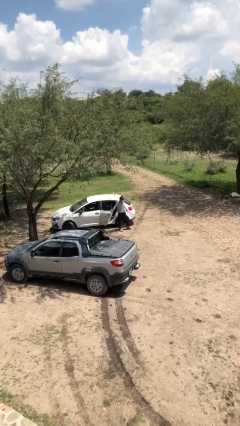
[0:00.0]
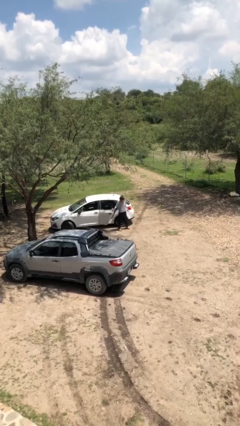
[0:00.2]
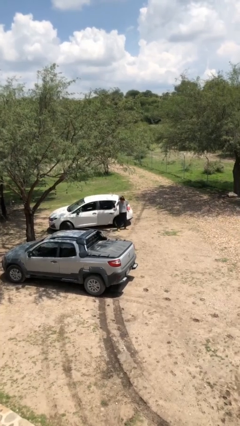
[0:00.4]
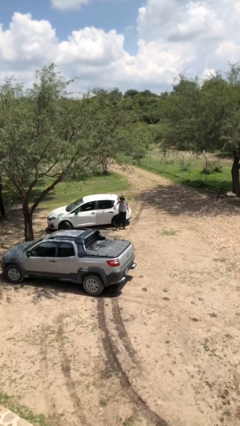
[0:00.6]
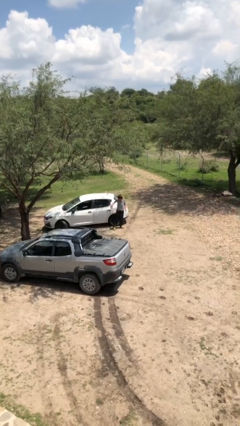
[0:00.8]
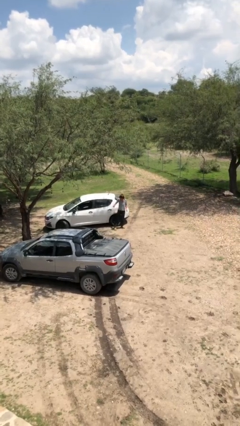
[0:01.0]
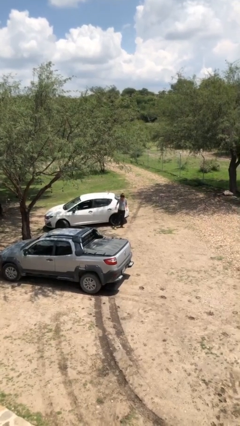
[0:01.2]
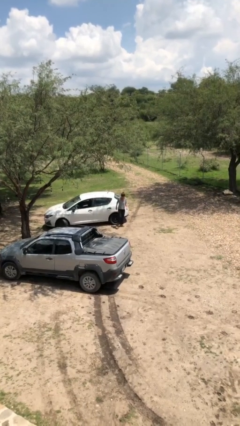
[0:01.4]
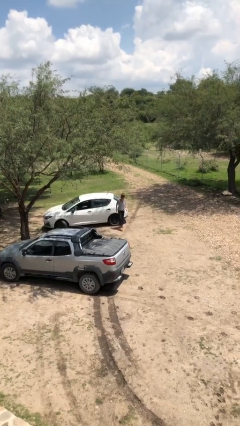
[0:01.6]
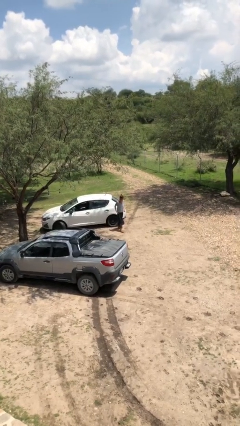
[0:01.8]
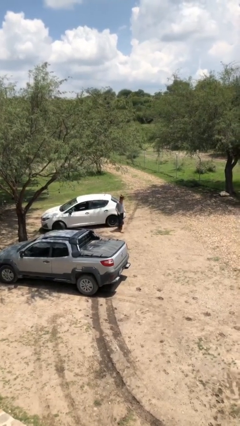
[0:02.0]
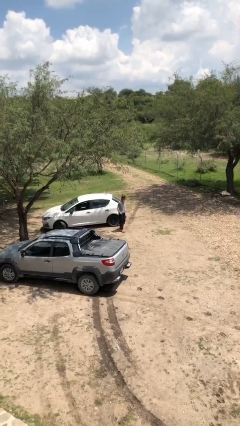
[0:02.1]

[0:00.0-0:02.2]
person closes car door

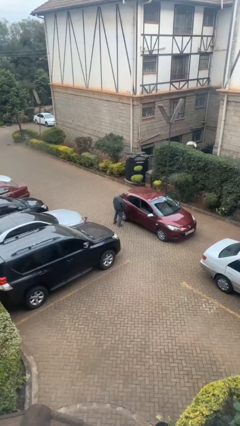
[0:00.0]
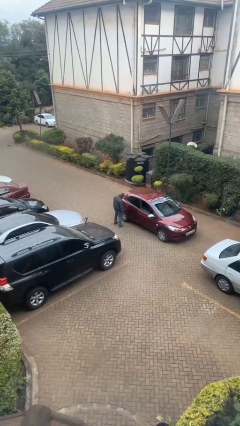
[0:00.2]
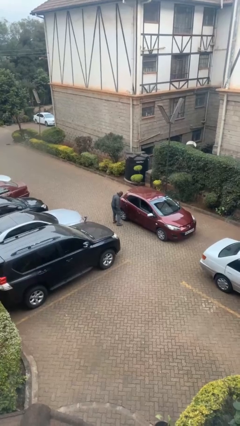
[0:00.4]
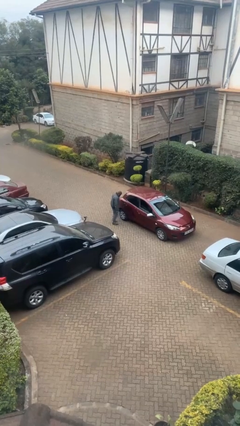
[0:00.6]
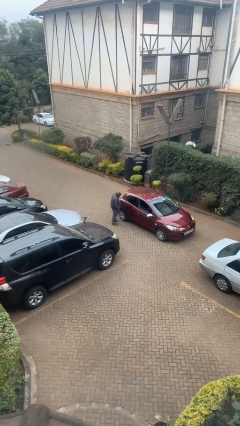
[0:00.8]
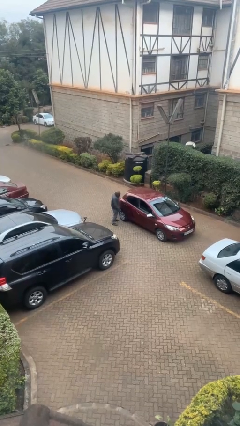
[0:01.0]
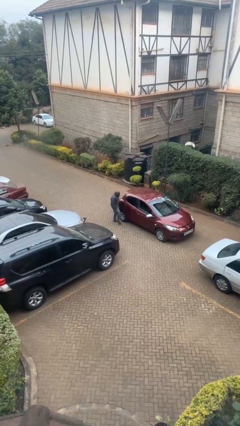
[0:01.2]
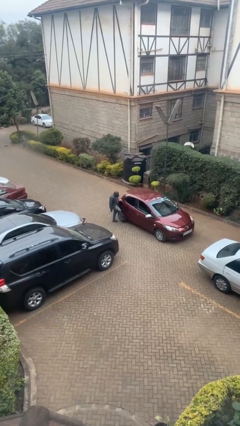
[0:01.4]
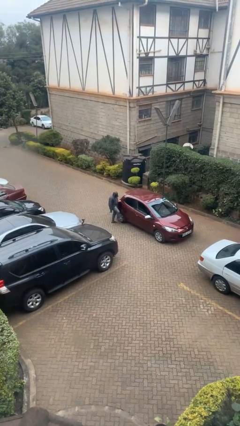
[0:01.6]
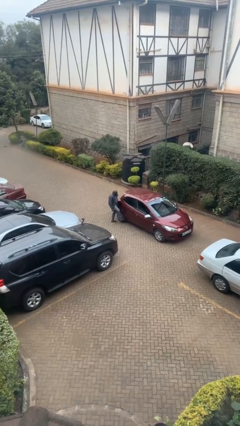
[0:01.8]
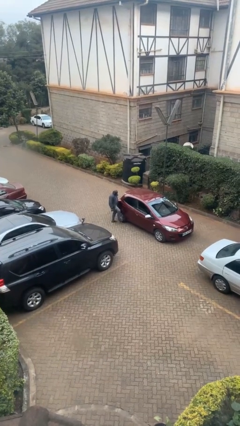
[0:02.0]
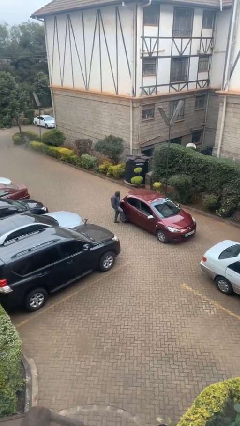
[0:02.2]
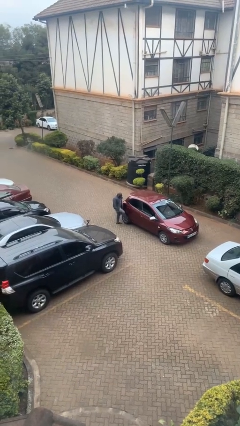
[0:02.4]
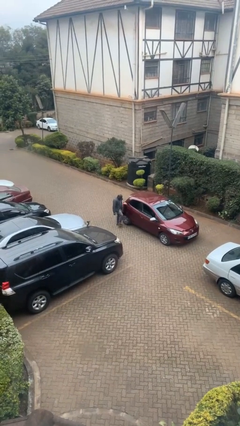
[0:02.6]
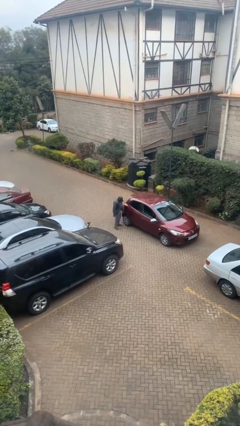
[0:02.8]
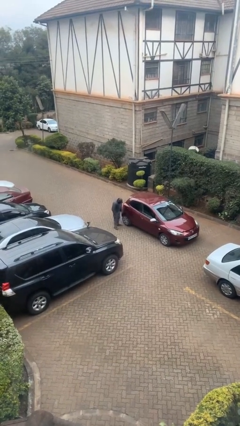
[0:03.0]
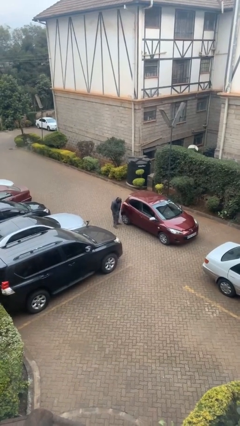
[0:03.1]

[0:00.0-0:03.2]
person kicks car tires

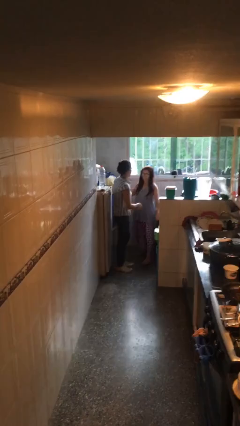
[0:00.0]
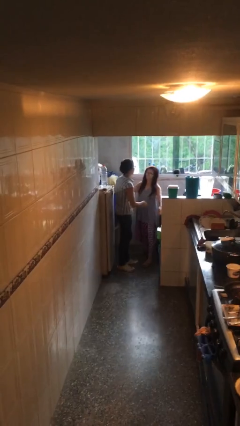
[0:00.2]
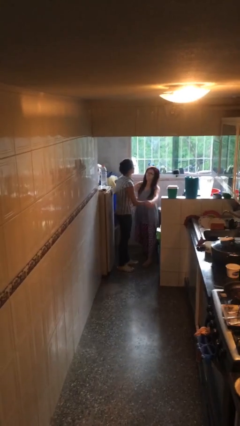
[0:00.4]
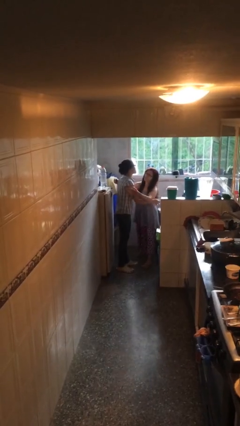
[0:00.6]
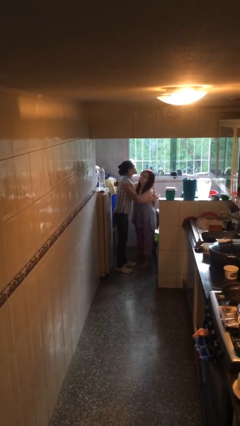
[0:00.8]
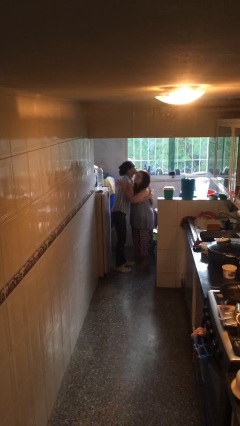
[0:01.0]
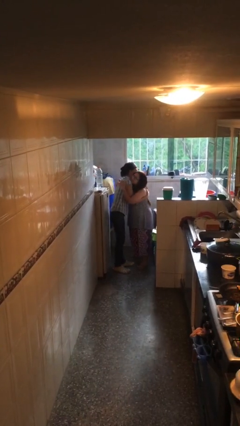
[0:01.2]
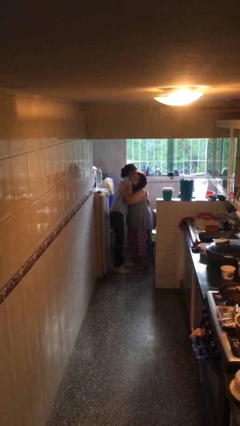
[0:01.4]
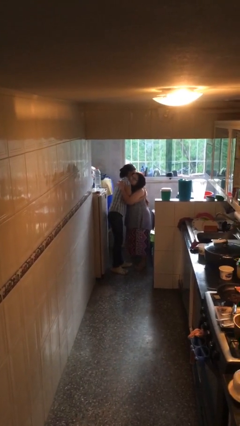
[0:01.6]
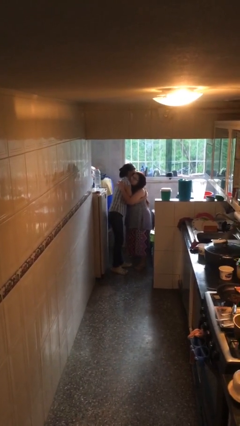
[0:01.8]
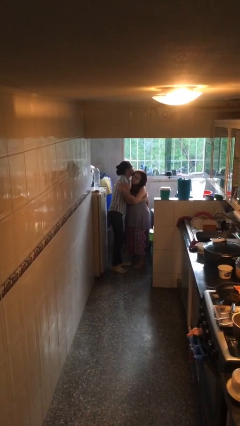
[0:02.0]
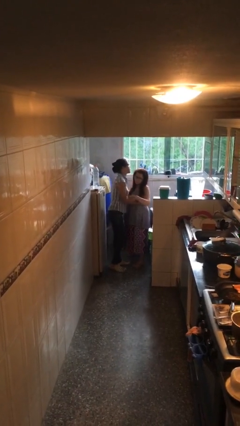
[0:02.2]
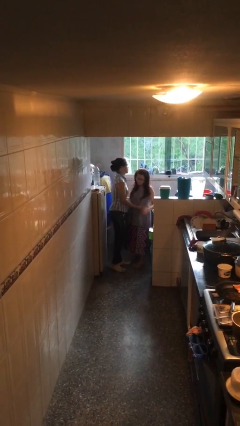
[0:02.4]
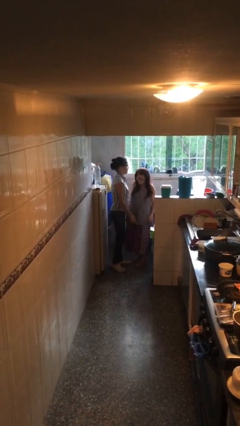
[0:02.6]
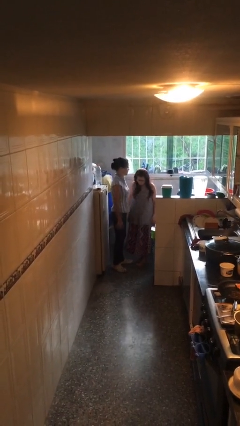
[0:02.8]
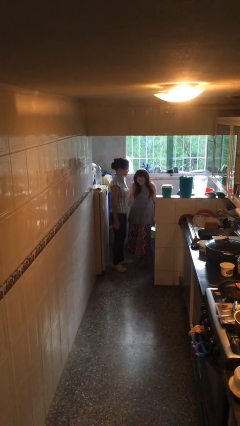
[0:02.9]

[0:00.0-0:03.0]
person embraces person

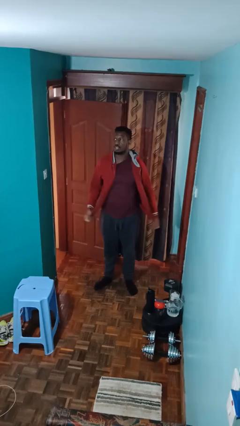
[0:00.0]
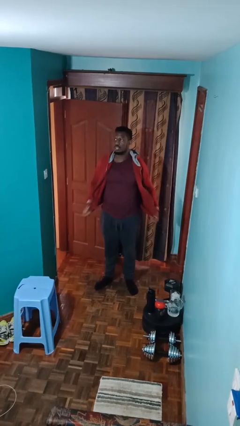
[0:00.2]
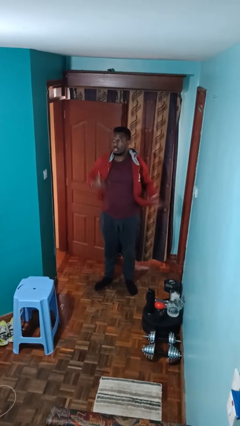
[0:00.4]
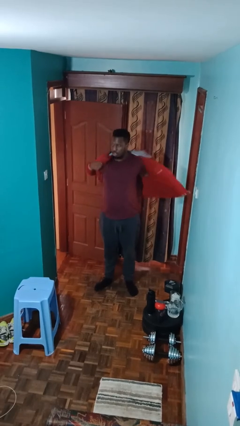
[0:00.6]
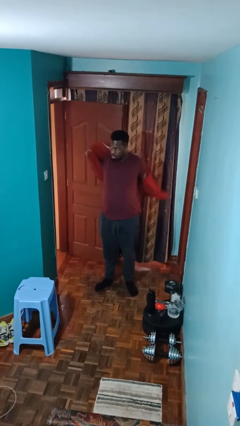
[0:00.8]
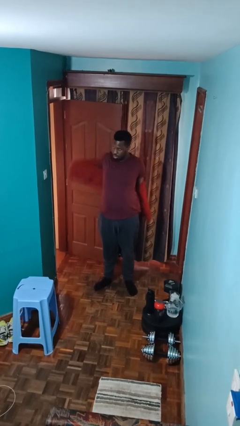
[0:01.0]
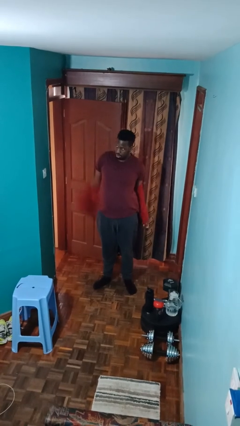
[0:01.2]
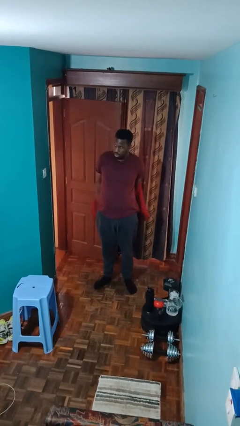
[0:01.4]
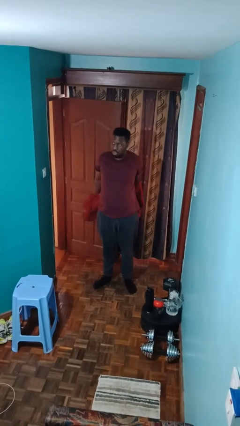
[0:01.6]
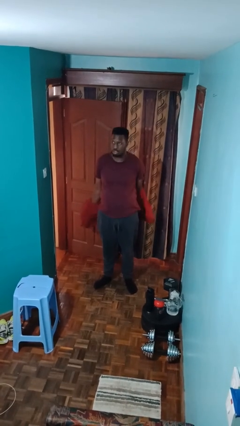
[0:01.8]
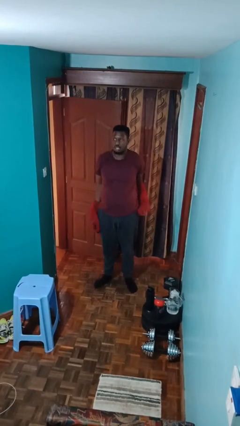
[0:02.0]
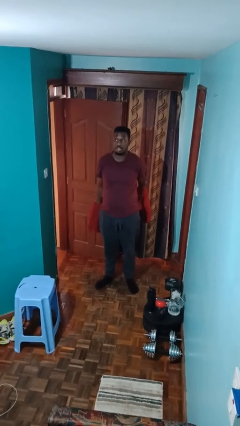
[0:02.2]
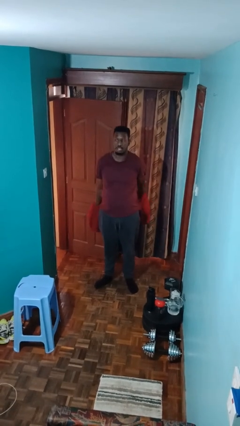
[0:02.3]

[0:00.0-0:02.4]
person takes off jacket

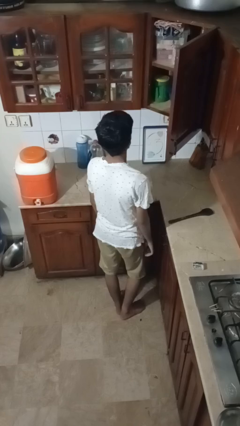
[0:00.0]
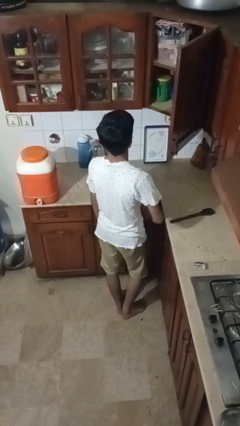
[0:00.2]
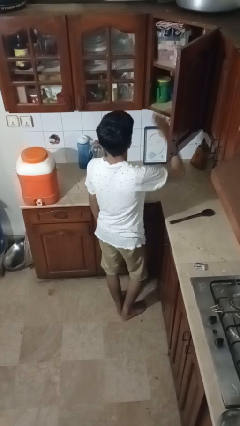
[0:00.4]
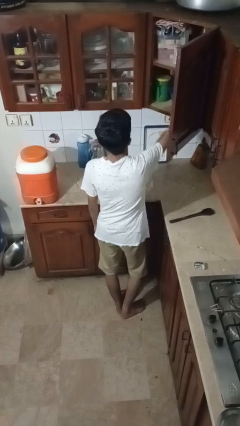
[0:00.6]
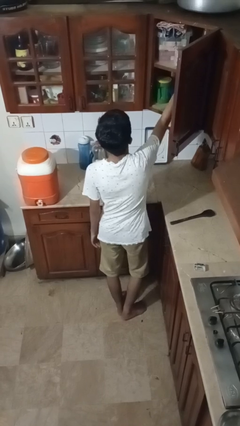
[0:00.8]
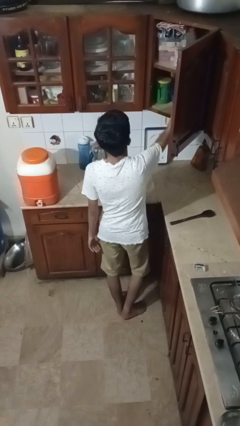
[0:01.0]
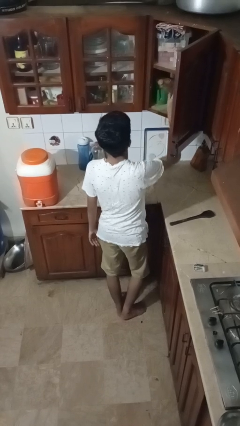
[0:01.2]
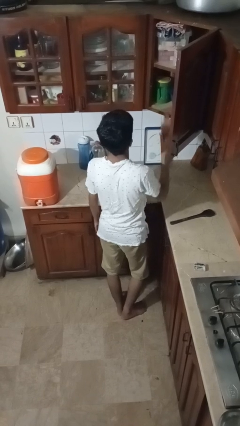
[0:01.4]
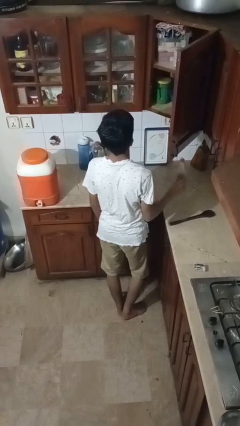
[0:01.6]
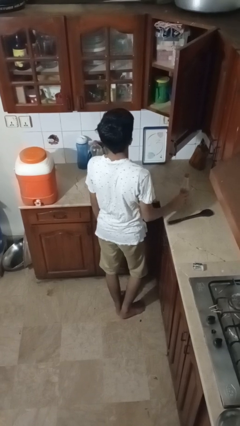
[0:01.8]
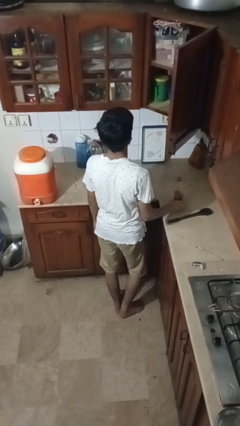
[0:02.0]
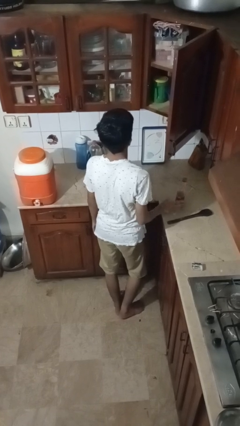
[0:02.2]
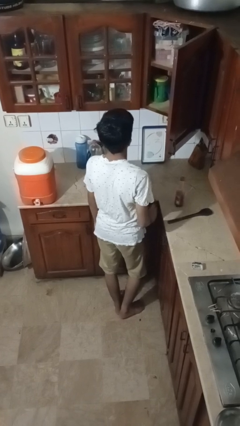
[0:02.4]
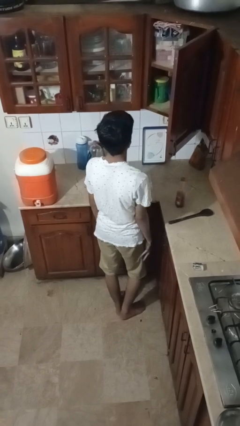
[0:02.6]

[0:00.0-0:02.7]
person takes object from cabinet

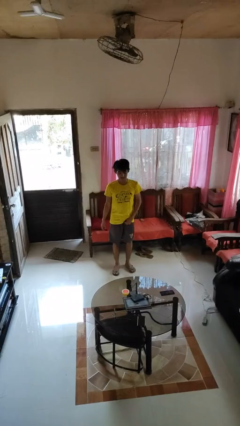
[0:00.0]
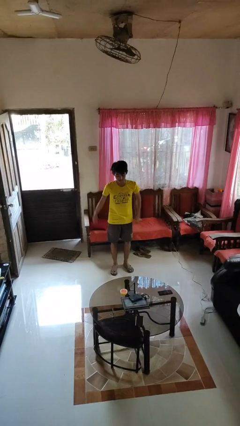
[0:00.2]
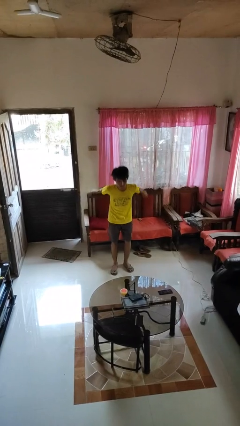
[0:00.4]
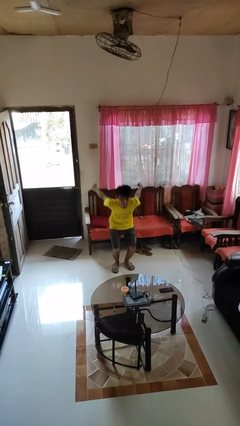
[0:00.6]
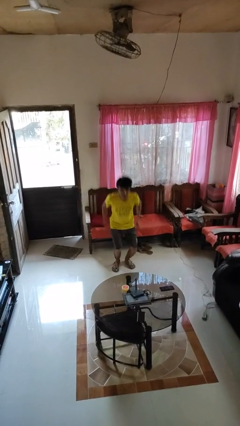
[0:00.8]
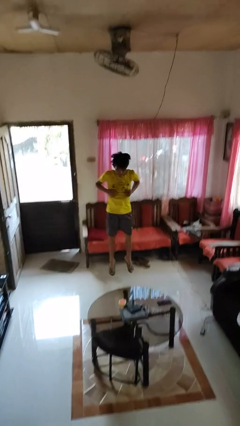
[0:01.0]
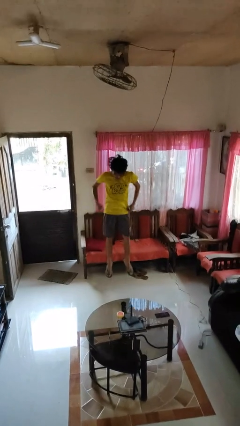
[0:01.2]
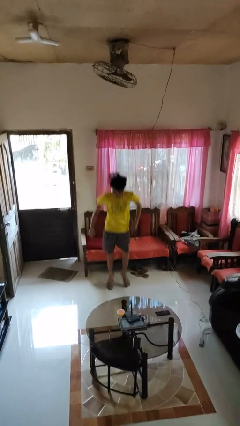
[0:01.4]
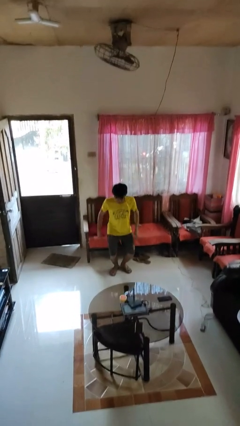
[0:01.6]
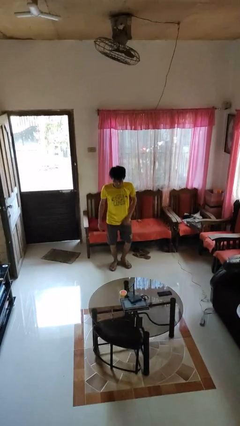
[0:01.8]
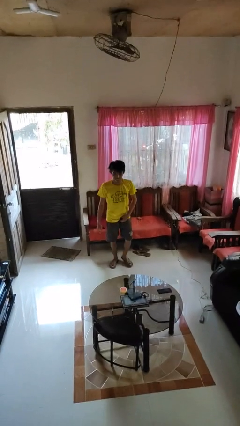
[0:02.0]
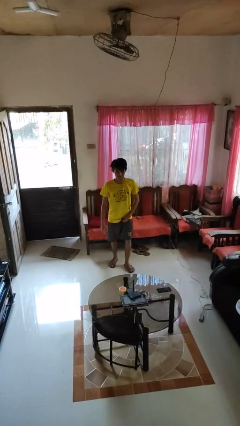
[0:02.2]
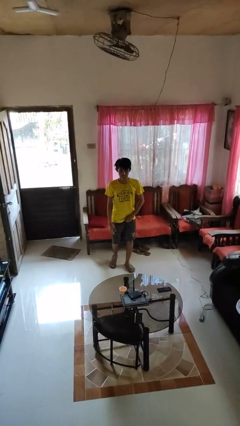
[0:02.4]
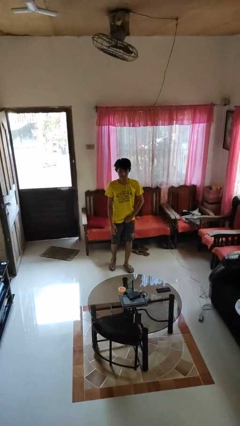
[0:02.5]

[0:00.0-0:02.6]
person jumps

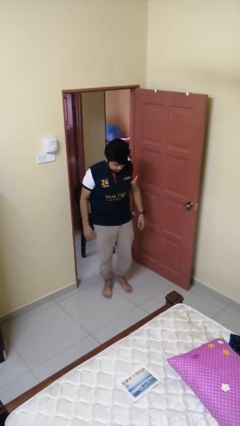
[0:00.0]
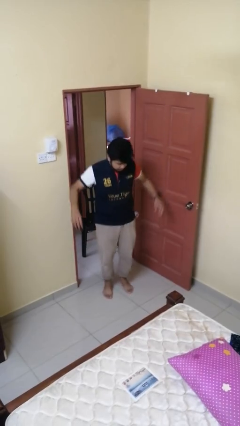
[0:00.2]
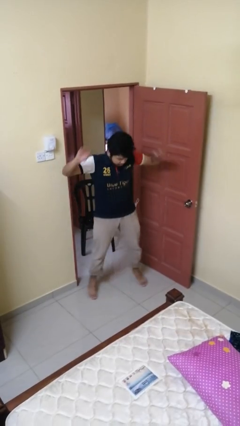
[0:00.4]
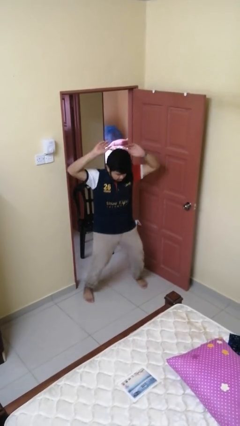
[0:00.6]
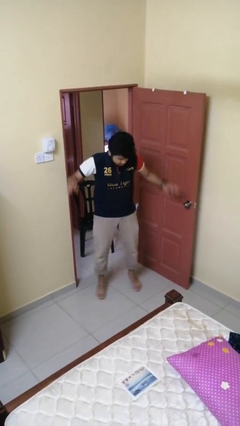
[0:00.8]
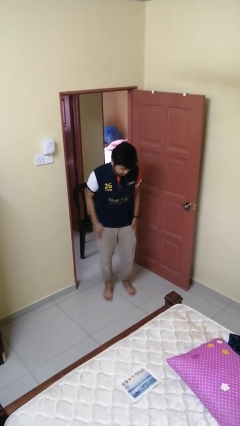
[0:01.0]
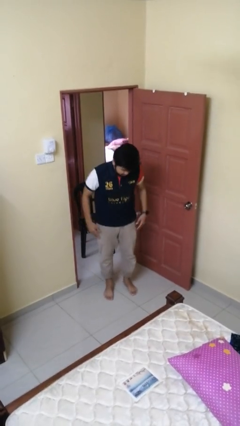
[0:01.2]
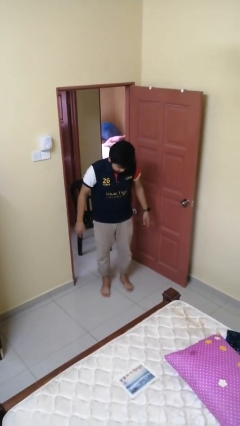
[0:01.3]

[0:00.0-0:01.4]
person exercises with jumping jacks
